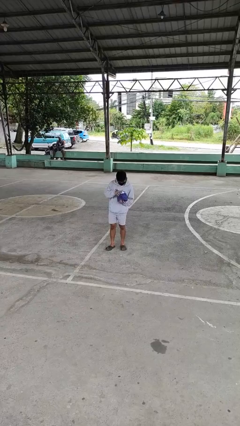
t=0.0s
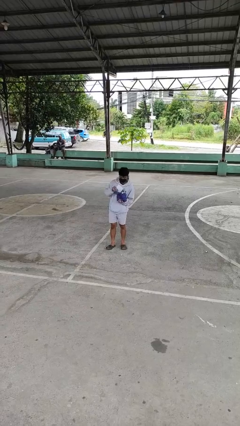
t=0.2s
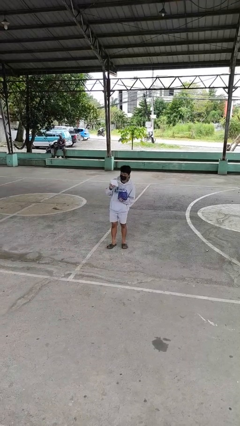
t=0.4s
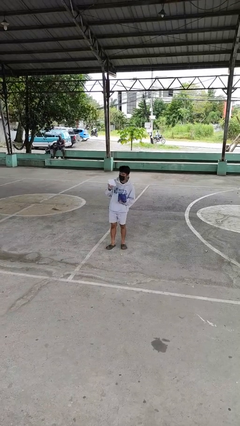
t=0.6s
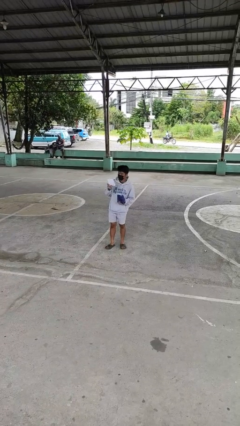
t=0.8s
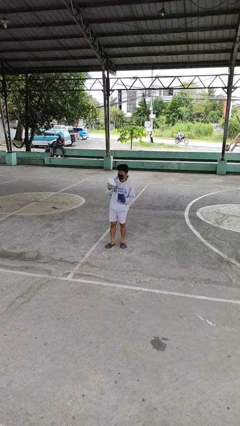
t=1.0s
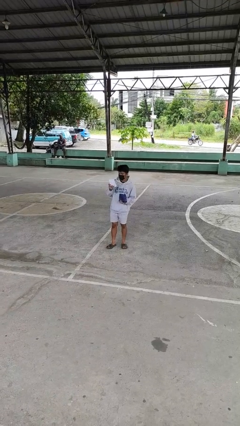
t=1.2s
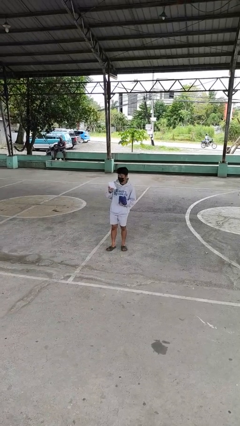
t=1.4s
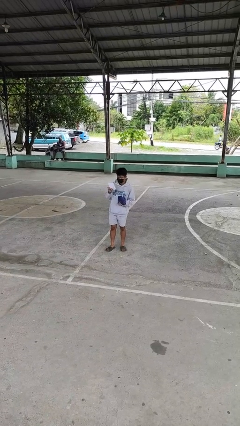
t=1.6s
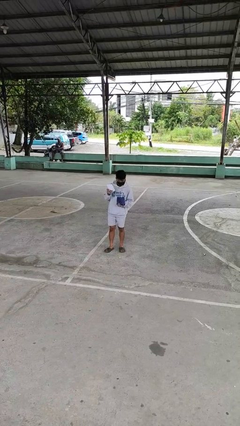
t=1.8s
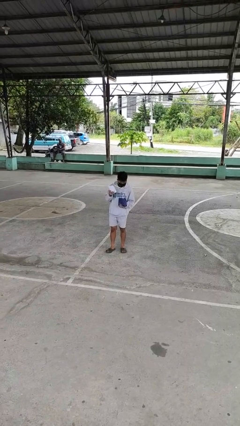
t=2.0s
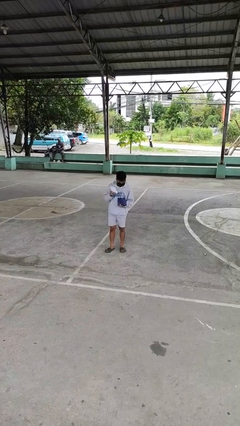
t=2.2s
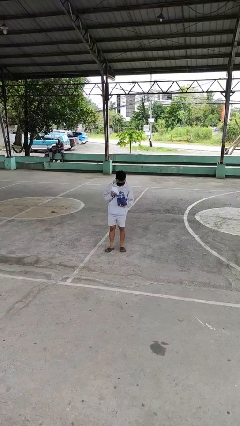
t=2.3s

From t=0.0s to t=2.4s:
person takes object from purse

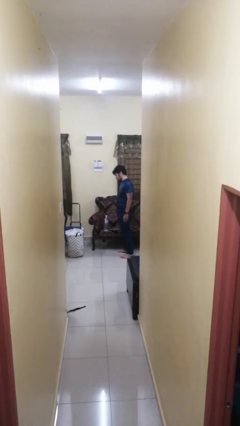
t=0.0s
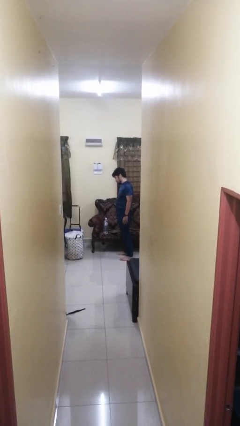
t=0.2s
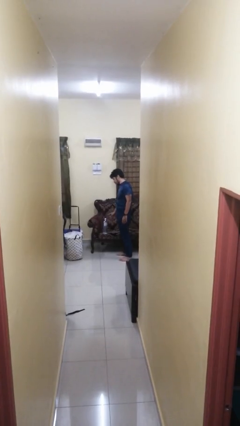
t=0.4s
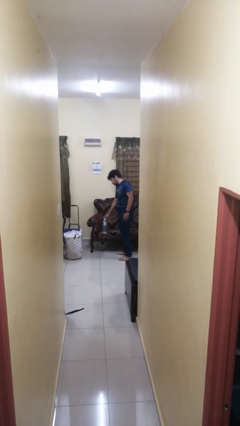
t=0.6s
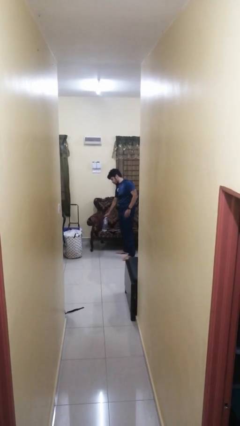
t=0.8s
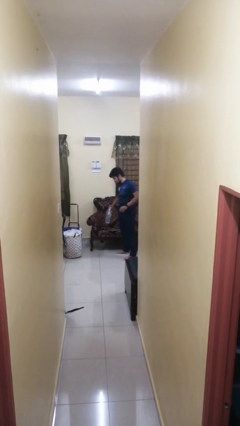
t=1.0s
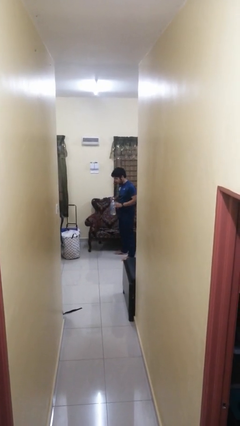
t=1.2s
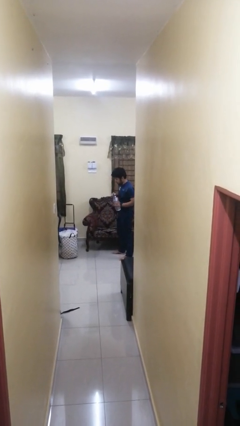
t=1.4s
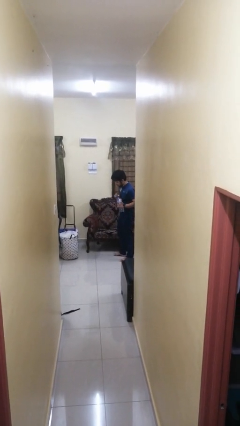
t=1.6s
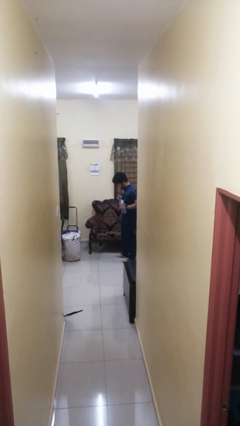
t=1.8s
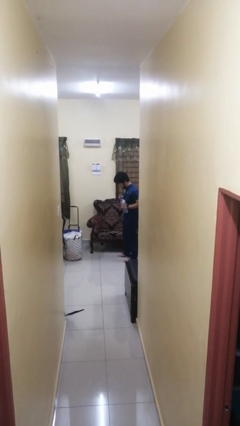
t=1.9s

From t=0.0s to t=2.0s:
person picks up object from couch

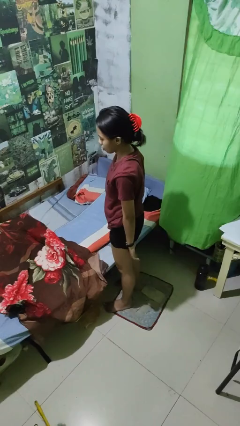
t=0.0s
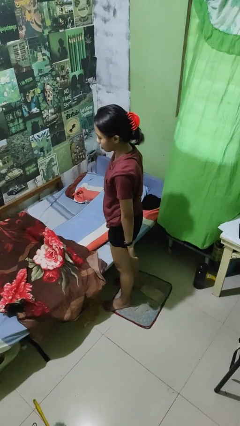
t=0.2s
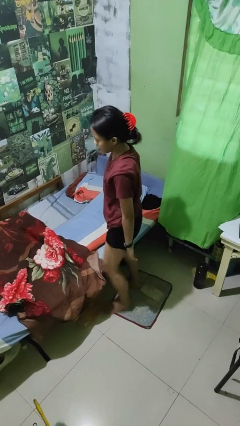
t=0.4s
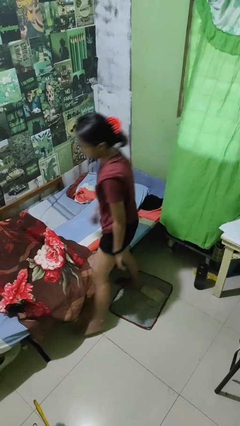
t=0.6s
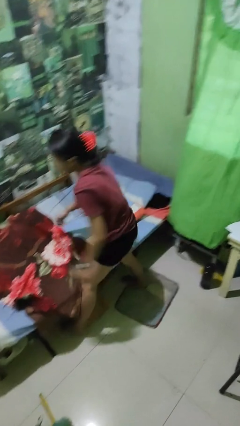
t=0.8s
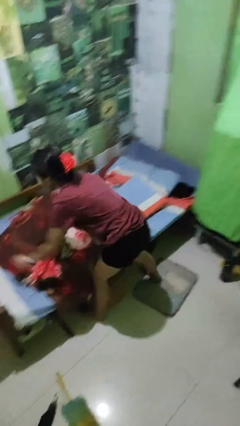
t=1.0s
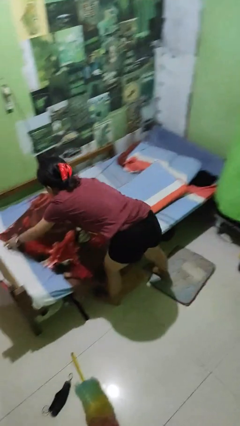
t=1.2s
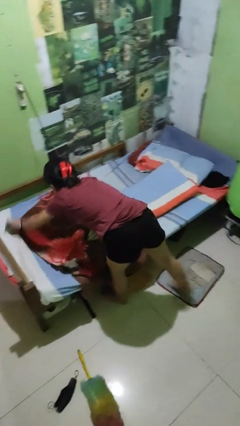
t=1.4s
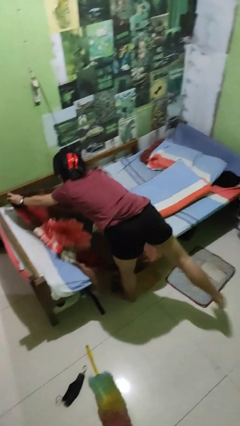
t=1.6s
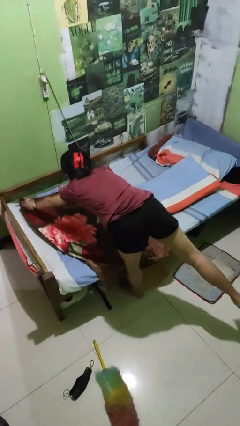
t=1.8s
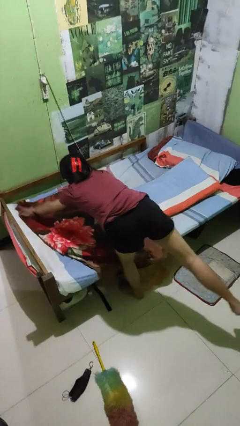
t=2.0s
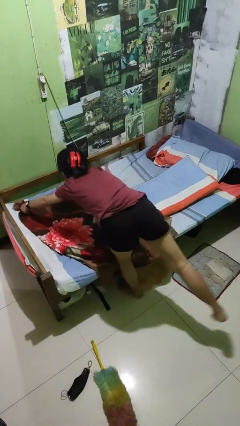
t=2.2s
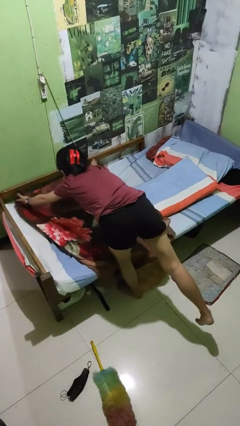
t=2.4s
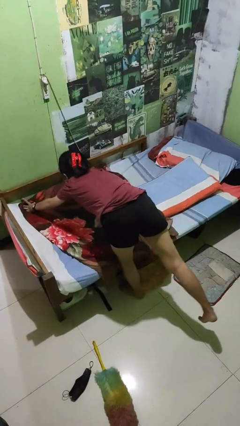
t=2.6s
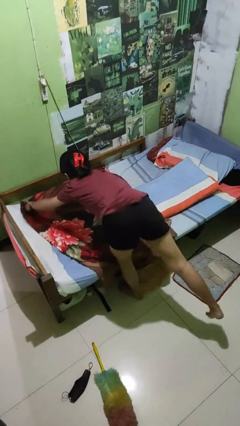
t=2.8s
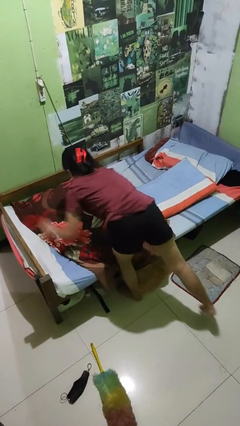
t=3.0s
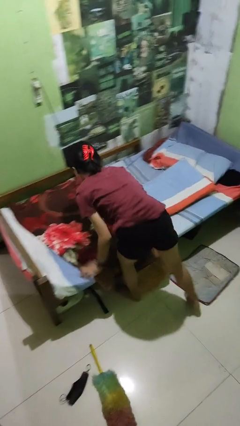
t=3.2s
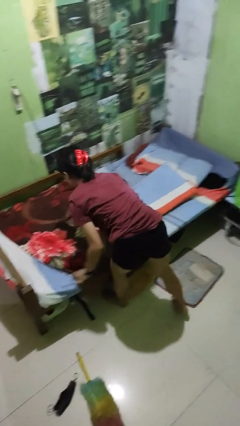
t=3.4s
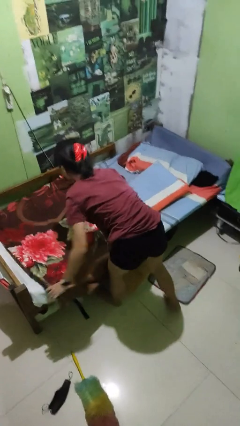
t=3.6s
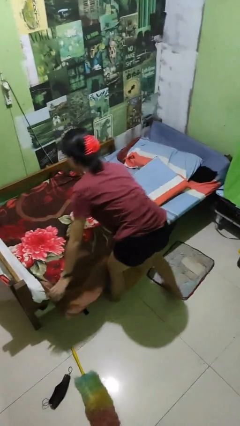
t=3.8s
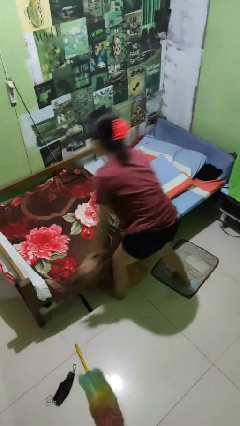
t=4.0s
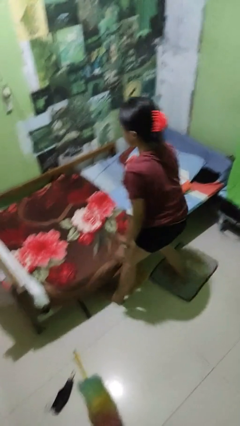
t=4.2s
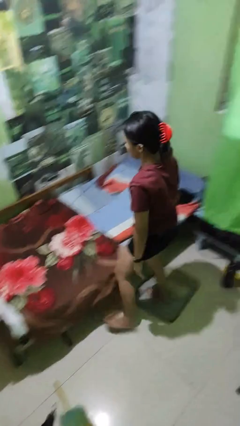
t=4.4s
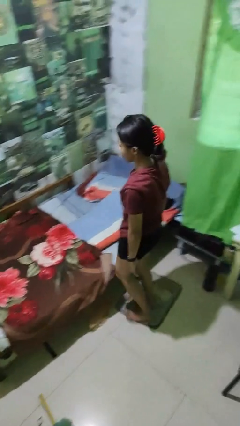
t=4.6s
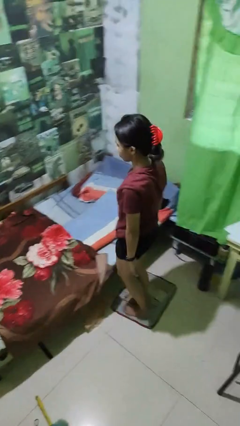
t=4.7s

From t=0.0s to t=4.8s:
person makes bed

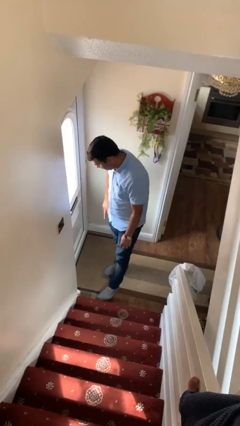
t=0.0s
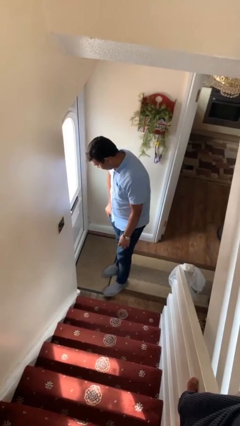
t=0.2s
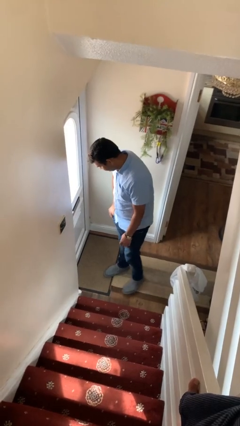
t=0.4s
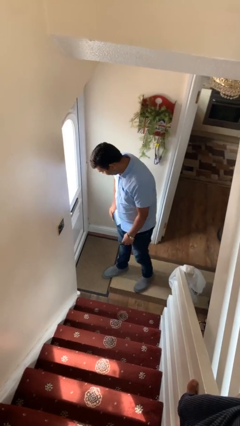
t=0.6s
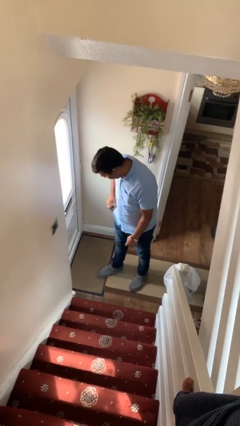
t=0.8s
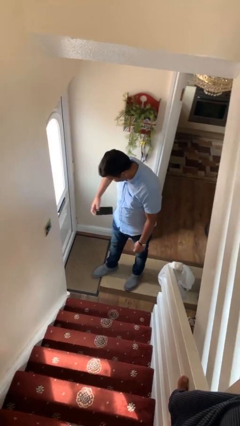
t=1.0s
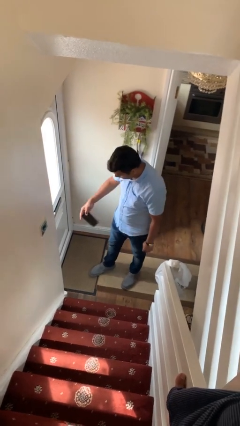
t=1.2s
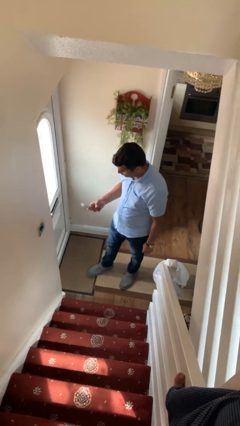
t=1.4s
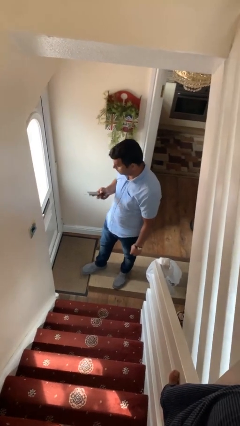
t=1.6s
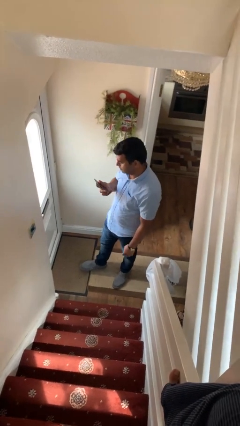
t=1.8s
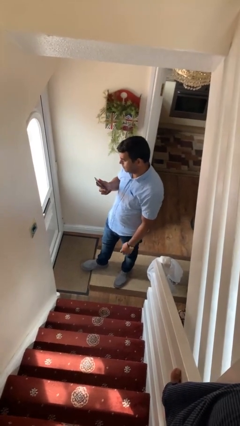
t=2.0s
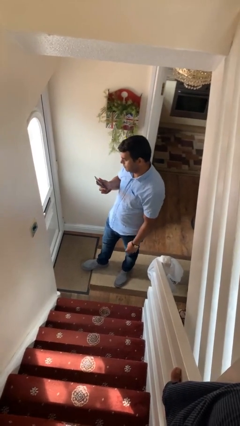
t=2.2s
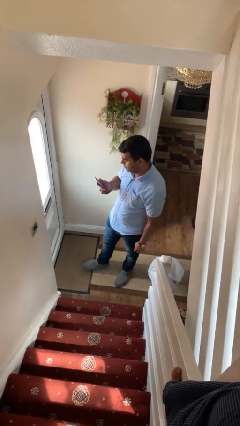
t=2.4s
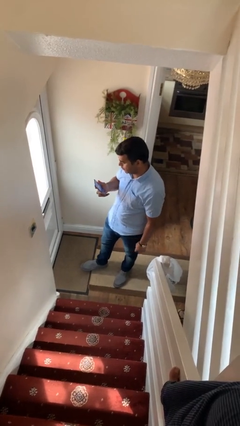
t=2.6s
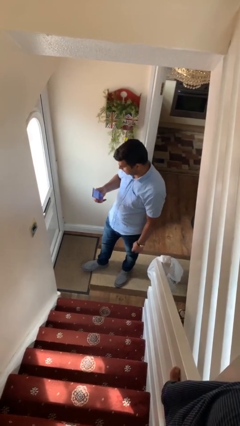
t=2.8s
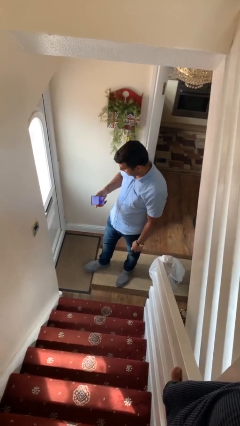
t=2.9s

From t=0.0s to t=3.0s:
person takes phone from pocket

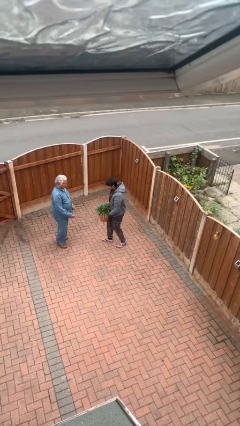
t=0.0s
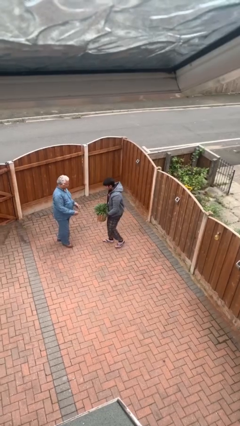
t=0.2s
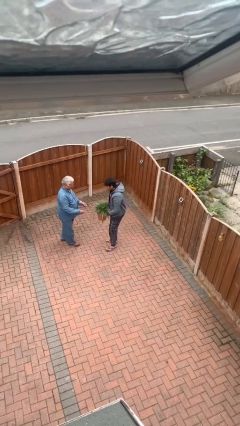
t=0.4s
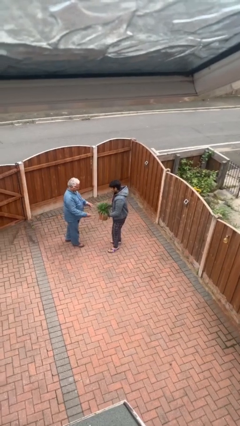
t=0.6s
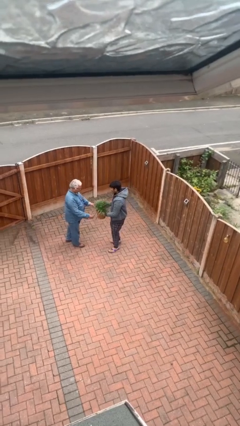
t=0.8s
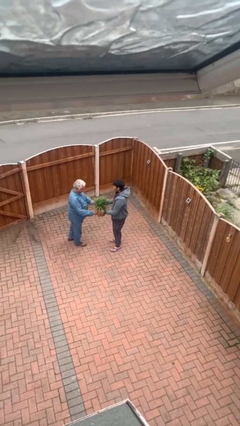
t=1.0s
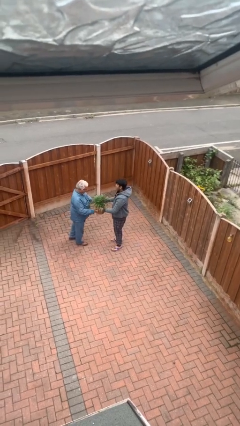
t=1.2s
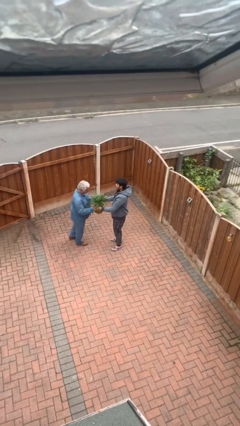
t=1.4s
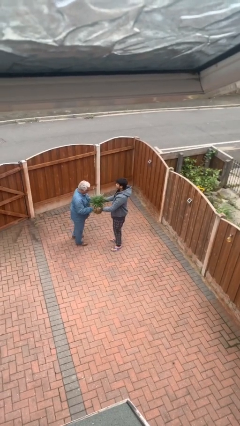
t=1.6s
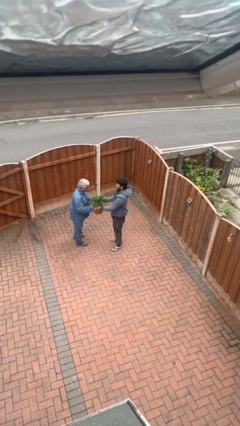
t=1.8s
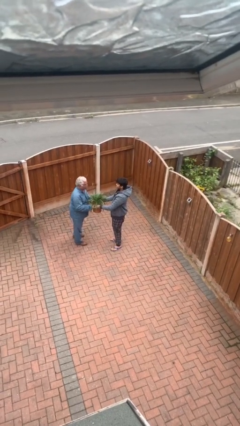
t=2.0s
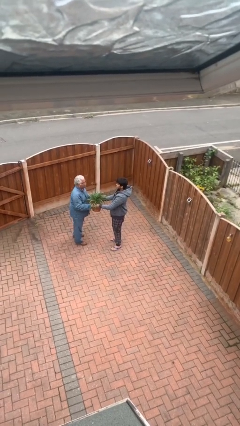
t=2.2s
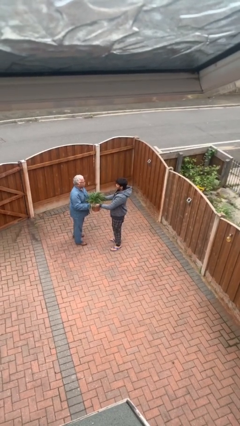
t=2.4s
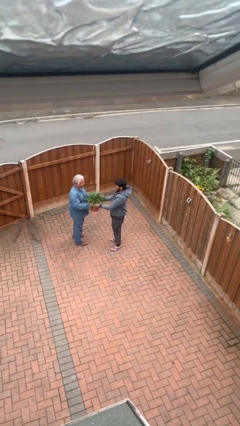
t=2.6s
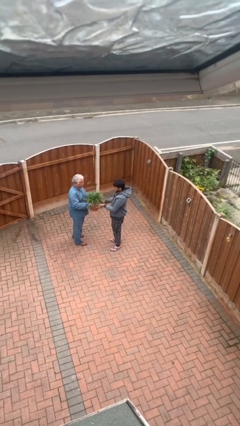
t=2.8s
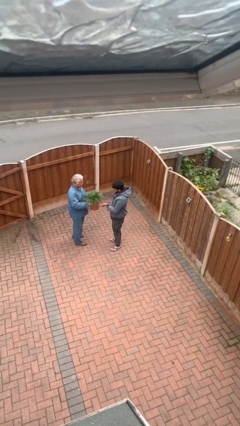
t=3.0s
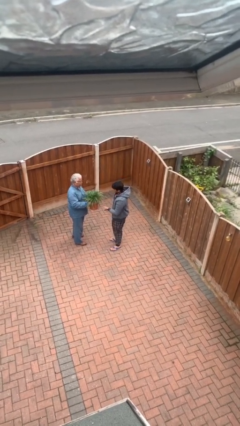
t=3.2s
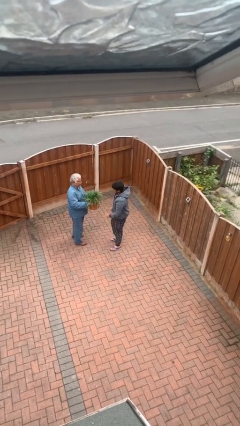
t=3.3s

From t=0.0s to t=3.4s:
person transfers object to person

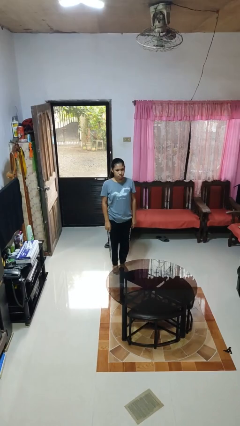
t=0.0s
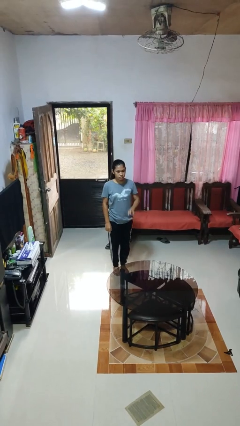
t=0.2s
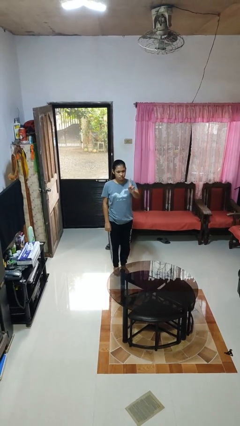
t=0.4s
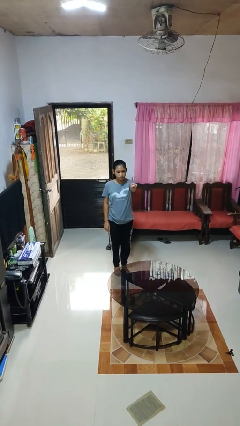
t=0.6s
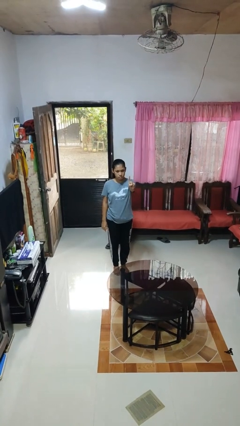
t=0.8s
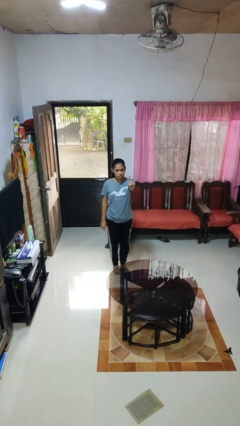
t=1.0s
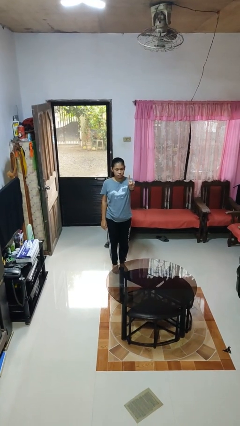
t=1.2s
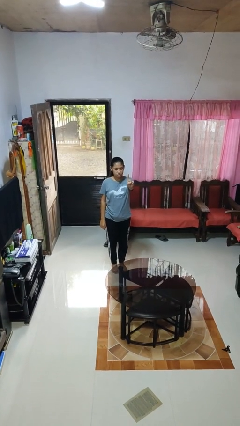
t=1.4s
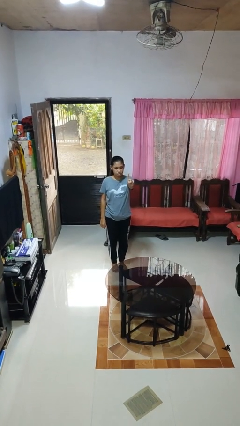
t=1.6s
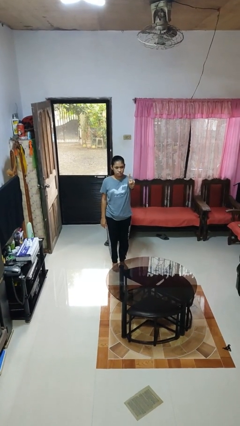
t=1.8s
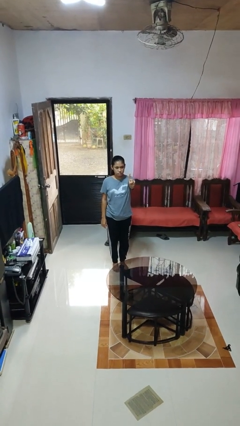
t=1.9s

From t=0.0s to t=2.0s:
person gestures number one
